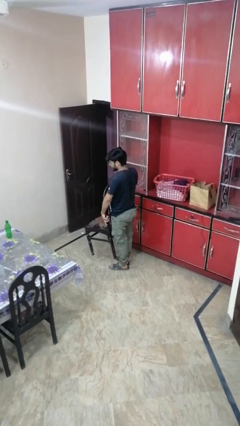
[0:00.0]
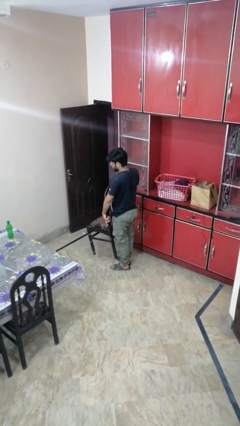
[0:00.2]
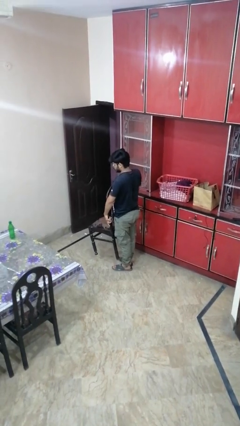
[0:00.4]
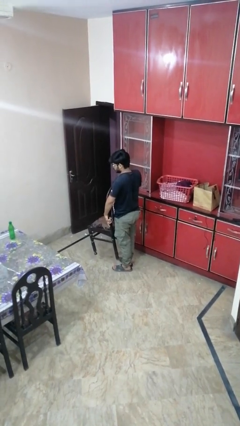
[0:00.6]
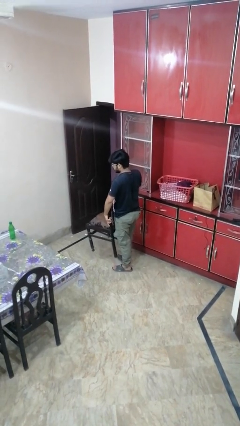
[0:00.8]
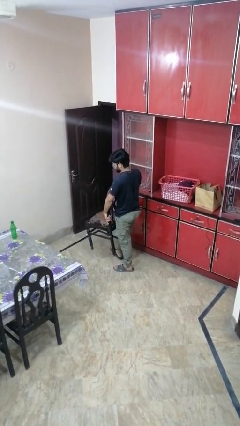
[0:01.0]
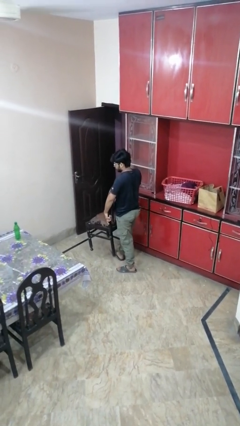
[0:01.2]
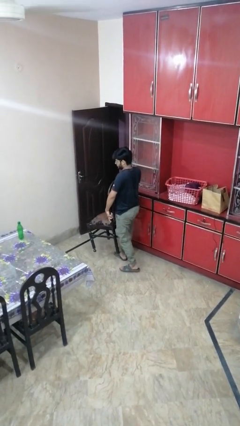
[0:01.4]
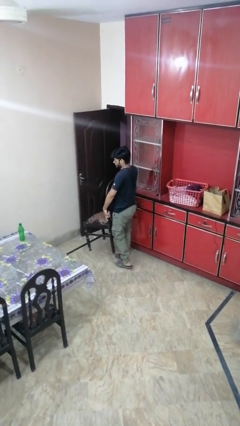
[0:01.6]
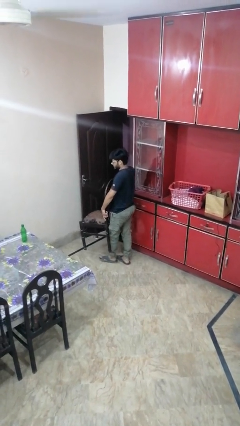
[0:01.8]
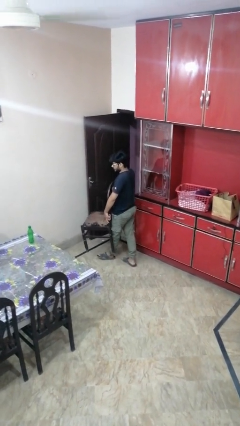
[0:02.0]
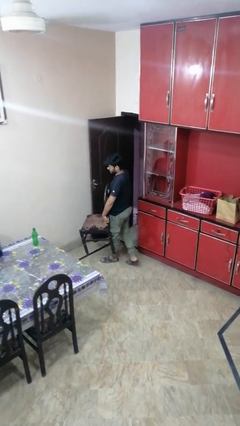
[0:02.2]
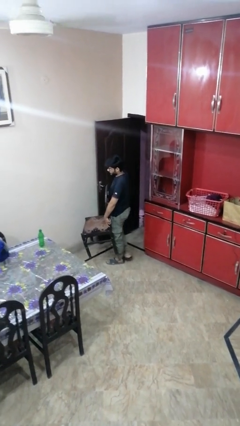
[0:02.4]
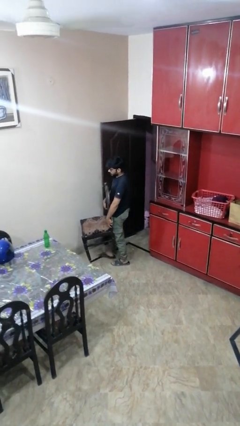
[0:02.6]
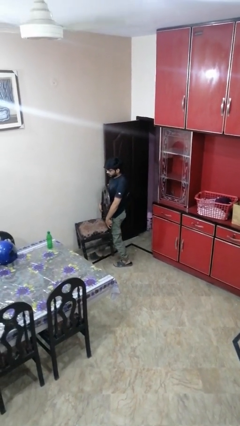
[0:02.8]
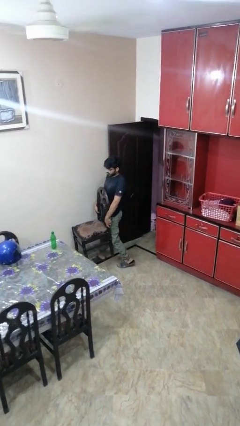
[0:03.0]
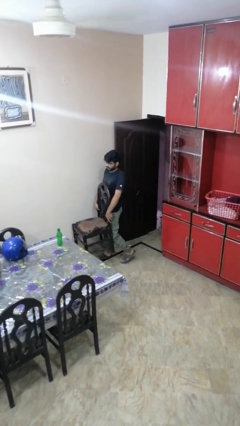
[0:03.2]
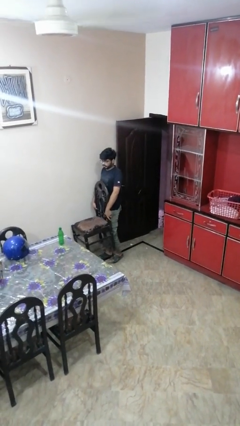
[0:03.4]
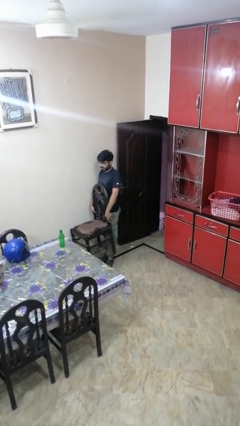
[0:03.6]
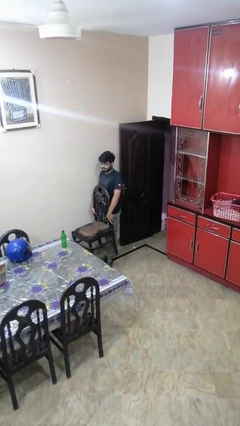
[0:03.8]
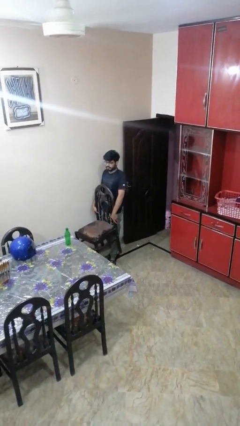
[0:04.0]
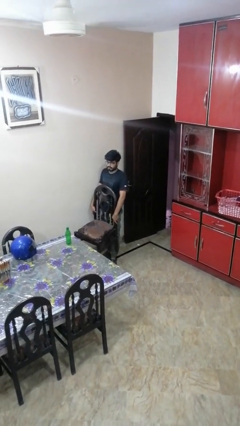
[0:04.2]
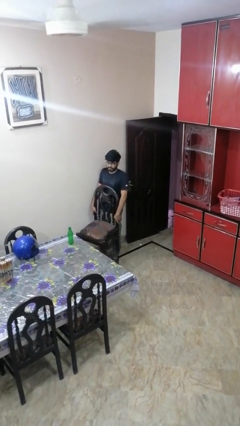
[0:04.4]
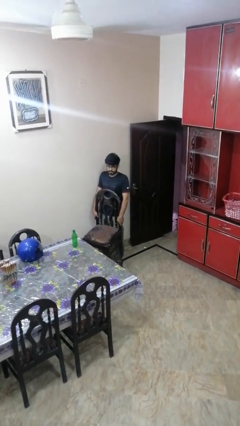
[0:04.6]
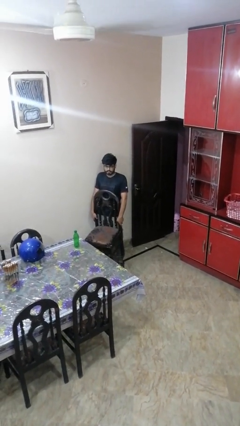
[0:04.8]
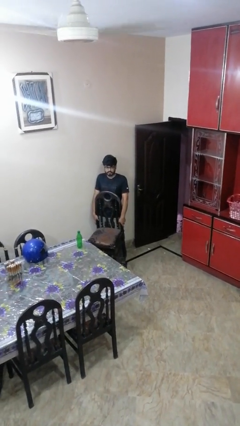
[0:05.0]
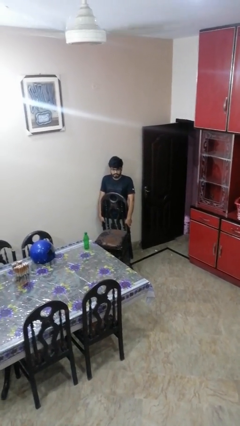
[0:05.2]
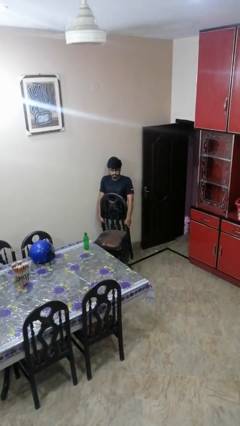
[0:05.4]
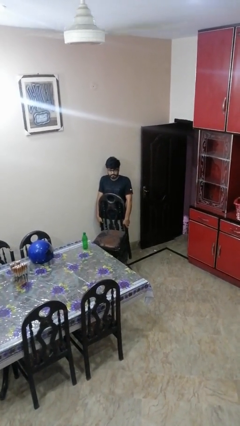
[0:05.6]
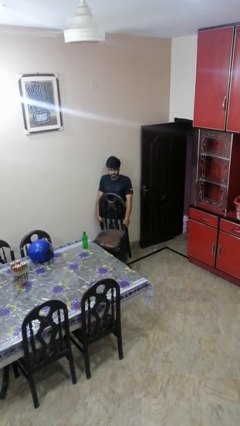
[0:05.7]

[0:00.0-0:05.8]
person carries furniture

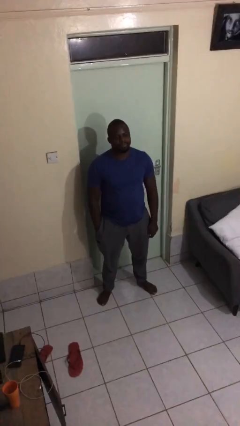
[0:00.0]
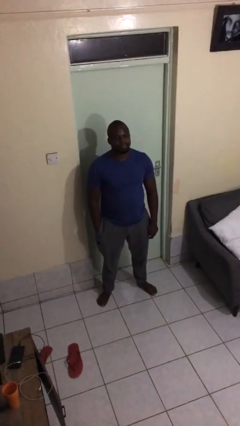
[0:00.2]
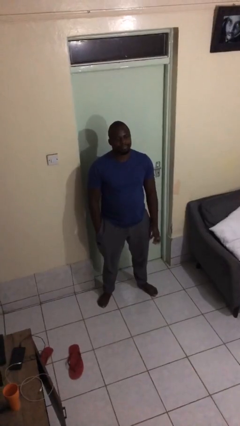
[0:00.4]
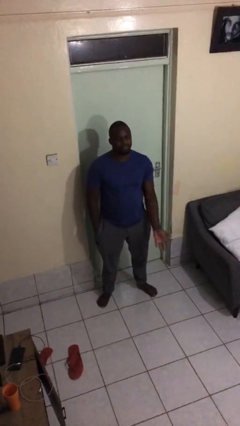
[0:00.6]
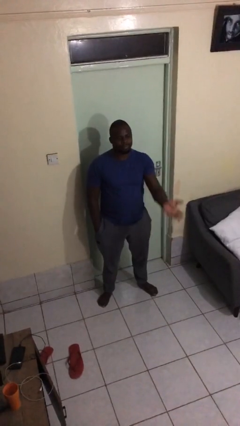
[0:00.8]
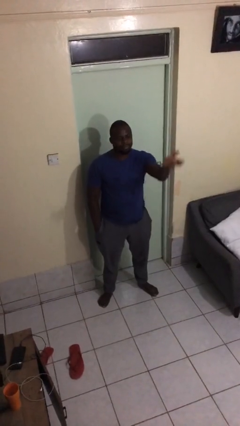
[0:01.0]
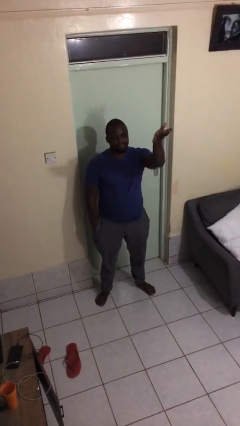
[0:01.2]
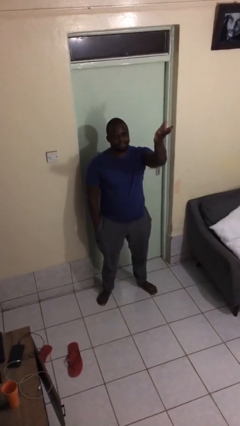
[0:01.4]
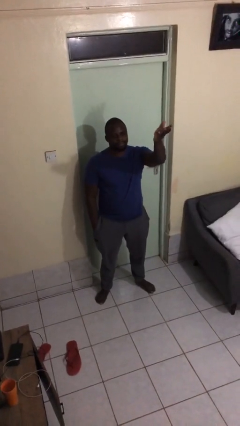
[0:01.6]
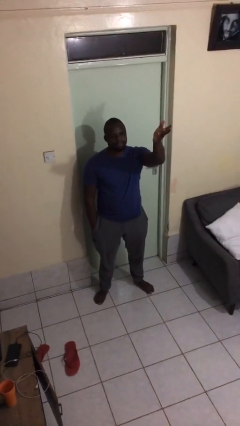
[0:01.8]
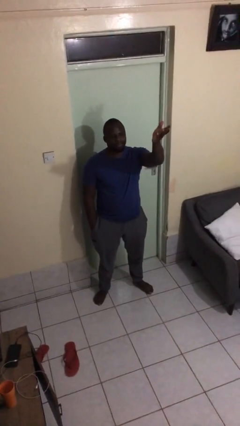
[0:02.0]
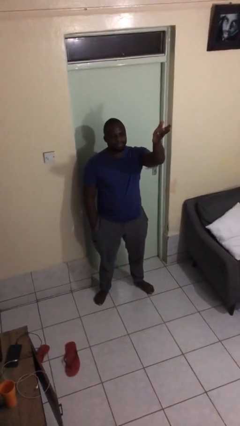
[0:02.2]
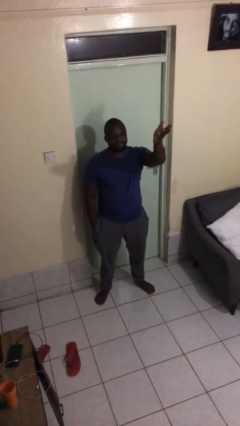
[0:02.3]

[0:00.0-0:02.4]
person gestures swipe up

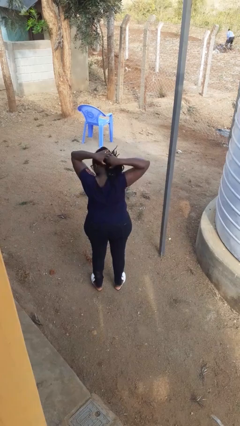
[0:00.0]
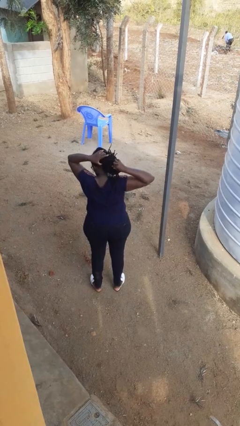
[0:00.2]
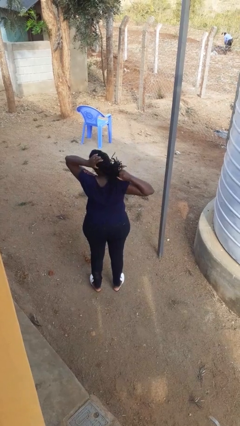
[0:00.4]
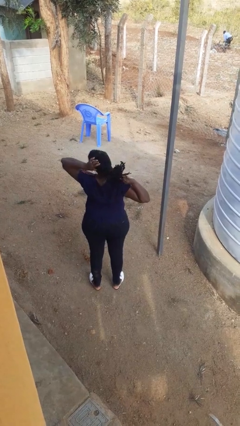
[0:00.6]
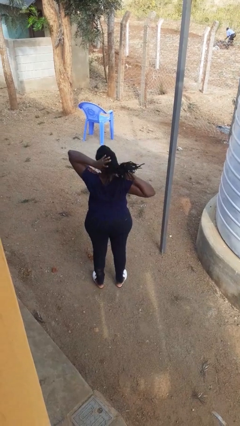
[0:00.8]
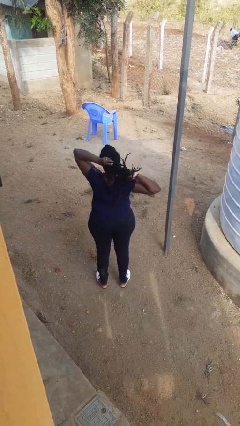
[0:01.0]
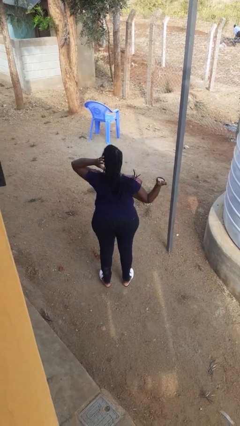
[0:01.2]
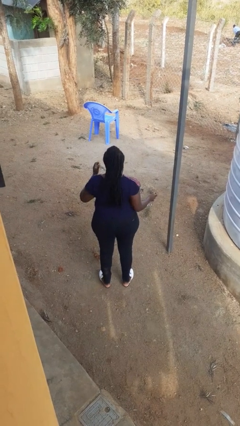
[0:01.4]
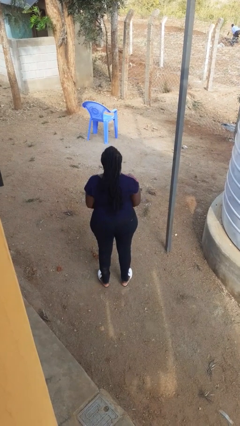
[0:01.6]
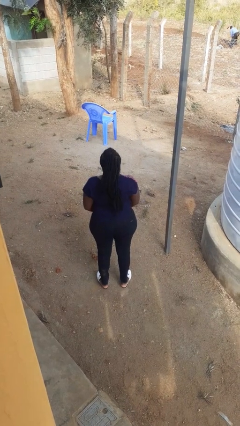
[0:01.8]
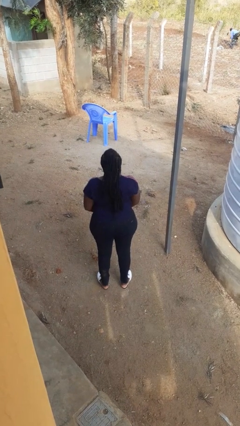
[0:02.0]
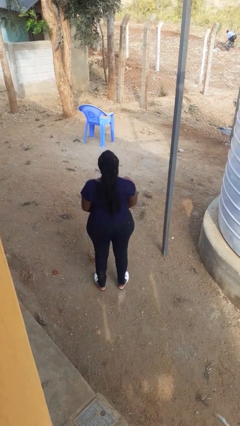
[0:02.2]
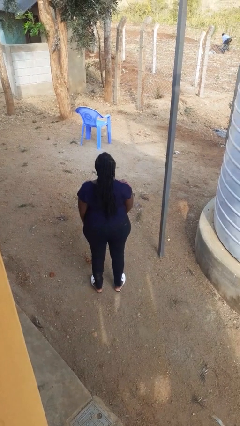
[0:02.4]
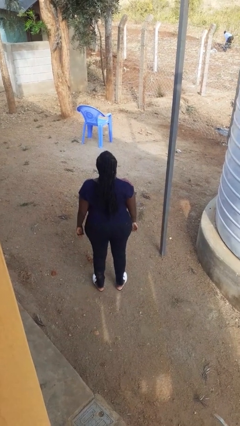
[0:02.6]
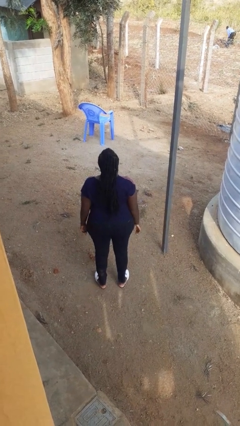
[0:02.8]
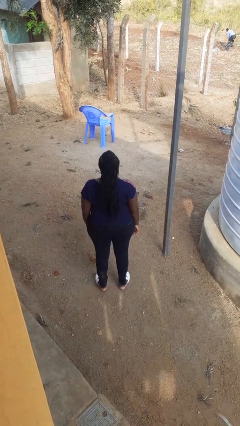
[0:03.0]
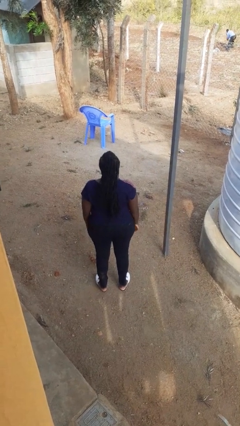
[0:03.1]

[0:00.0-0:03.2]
person takes off hairtie

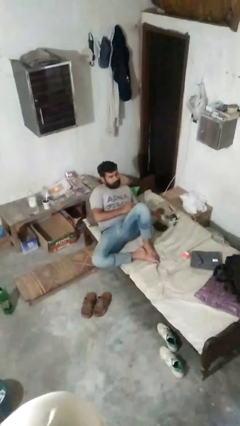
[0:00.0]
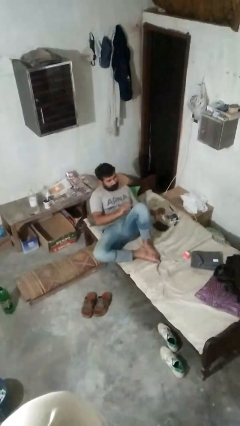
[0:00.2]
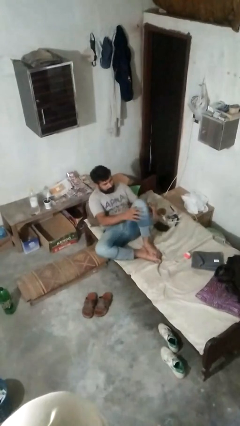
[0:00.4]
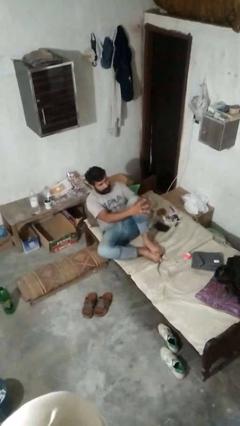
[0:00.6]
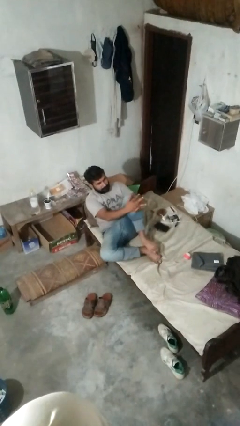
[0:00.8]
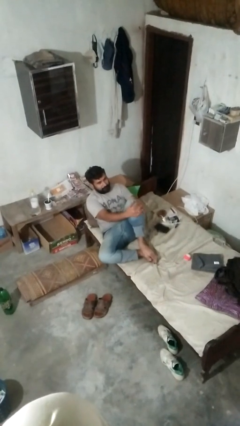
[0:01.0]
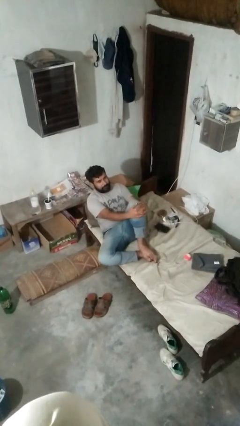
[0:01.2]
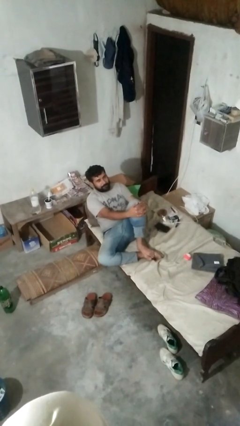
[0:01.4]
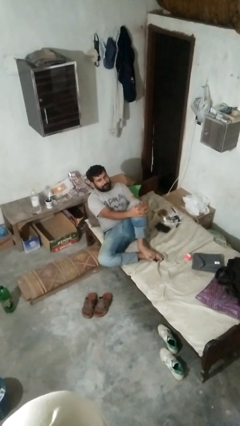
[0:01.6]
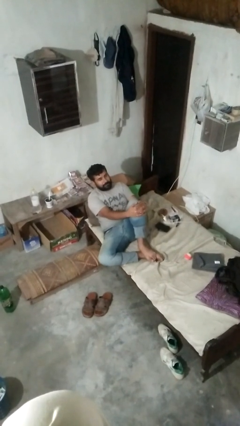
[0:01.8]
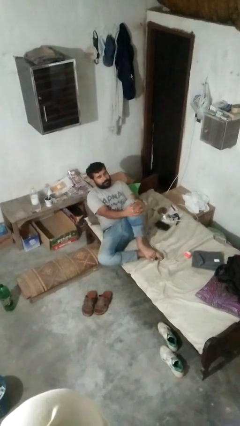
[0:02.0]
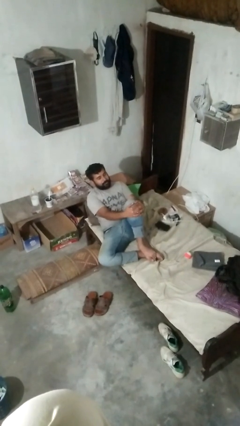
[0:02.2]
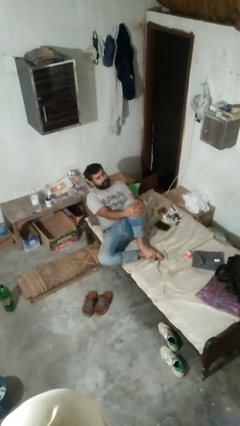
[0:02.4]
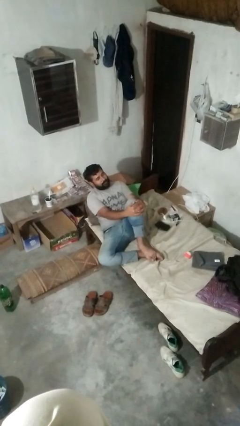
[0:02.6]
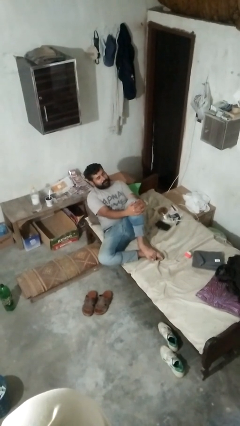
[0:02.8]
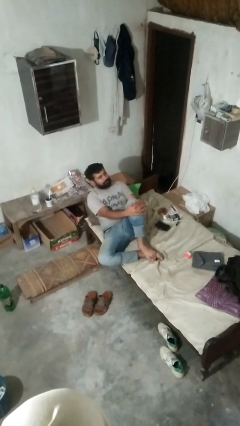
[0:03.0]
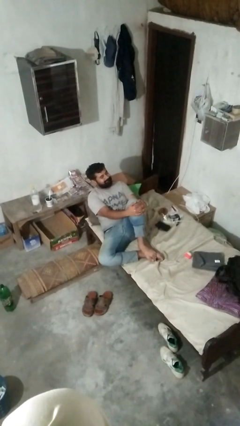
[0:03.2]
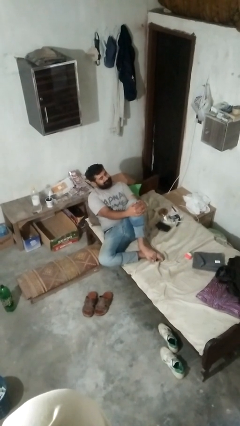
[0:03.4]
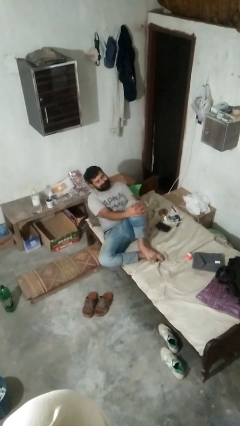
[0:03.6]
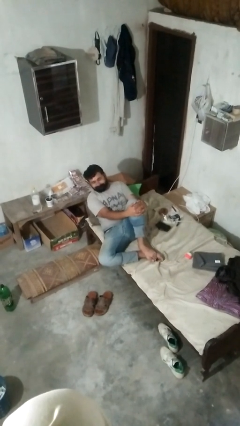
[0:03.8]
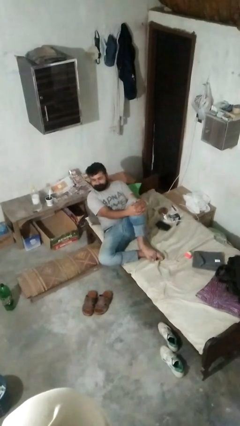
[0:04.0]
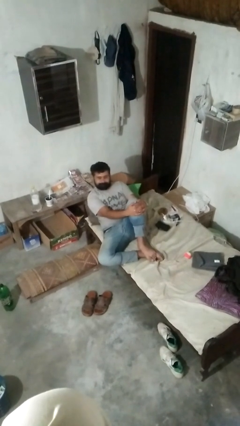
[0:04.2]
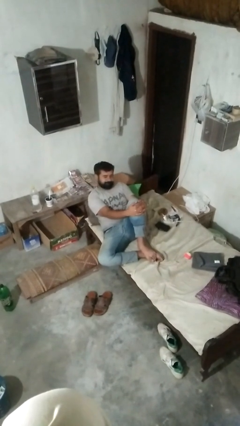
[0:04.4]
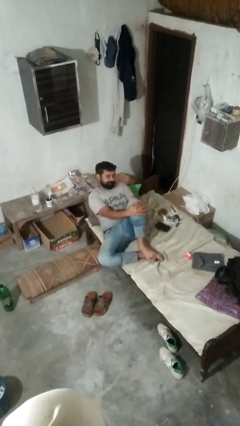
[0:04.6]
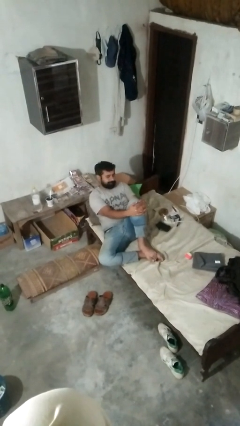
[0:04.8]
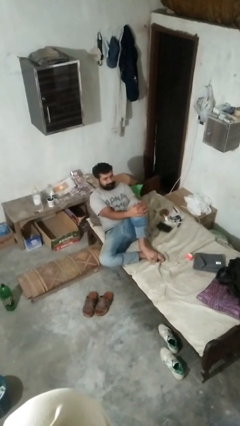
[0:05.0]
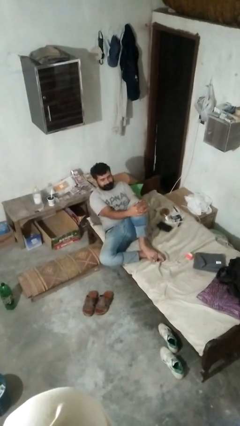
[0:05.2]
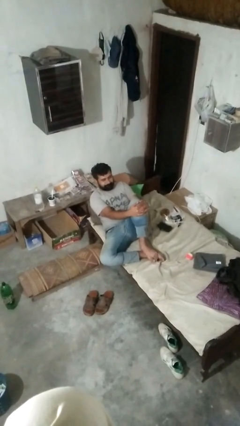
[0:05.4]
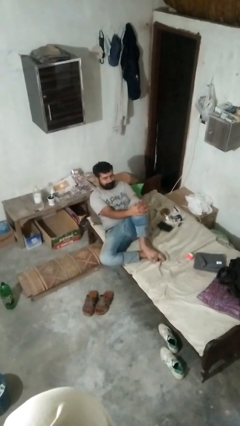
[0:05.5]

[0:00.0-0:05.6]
person strokes chin

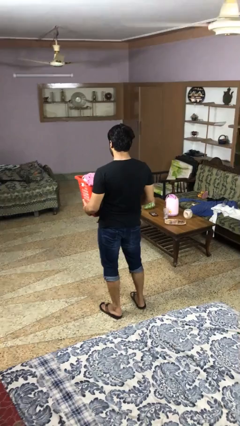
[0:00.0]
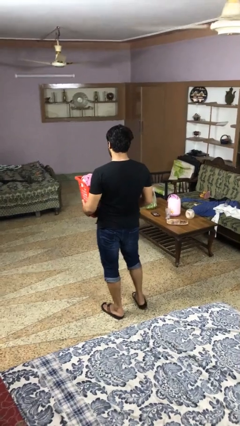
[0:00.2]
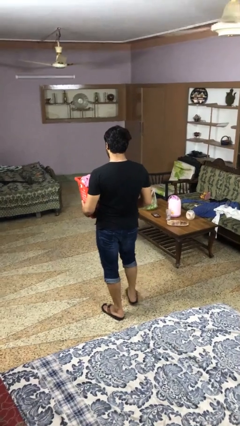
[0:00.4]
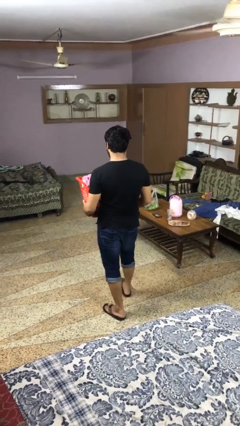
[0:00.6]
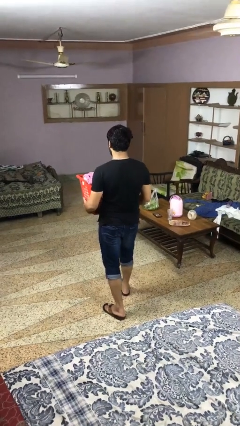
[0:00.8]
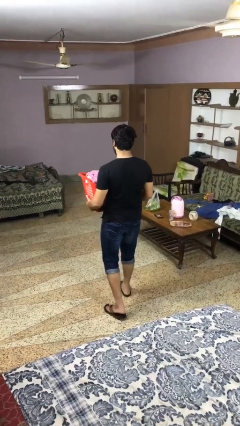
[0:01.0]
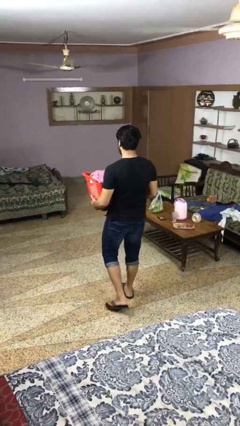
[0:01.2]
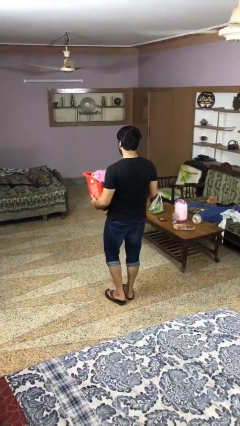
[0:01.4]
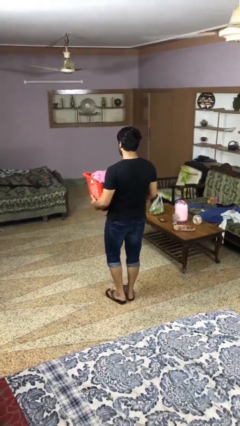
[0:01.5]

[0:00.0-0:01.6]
person carries laundry basket
